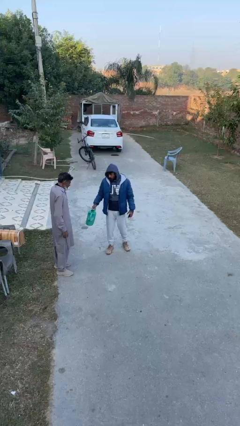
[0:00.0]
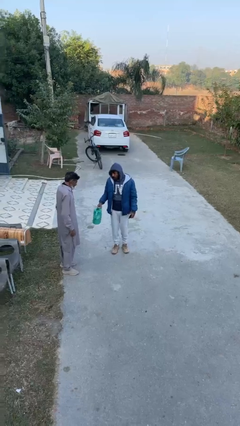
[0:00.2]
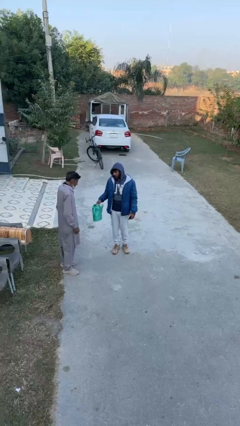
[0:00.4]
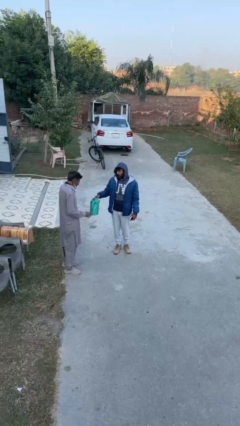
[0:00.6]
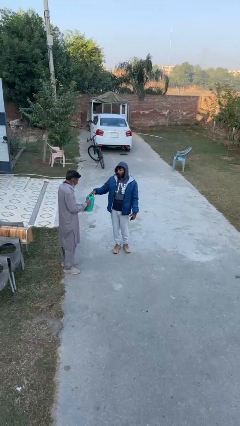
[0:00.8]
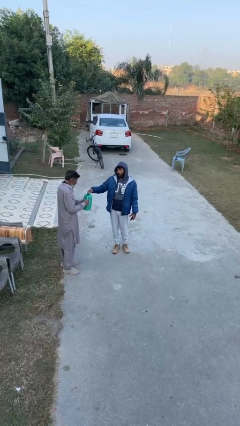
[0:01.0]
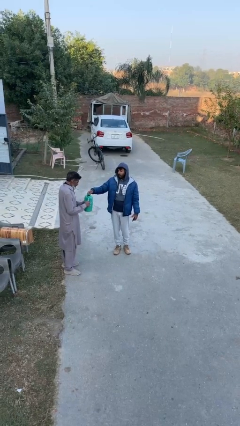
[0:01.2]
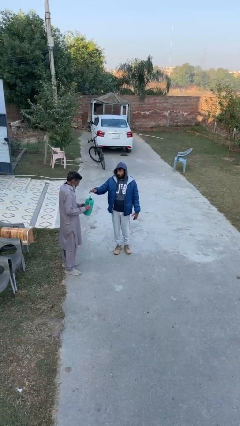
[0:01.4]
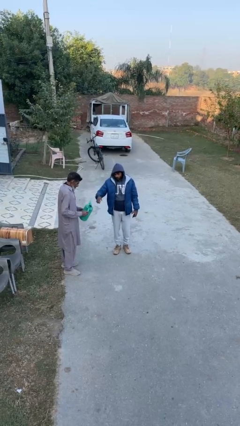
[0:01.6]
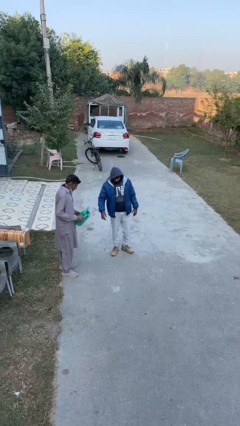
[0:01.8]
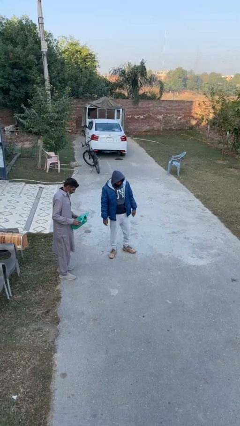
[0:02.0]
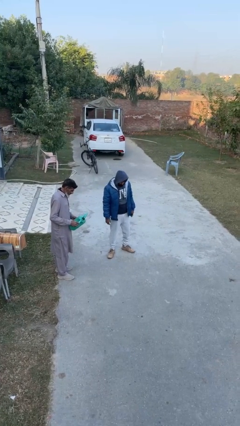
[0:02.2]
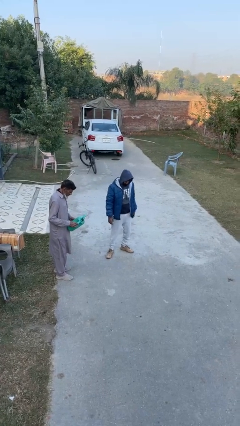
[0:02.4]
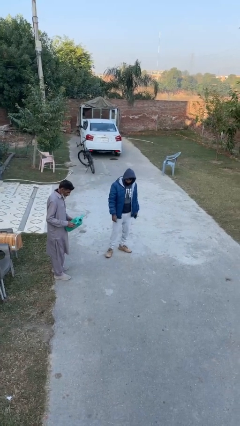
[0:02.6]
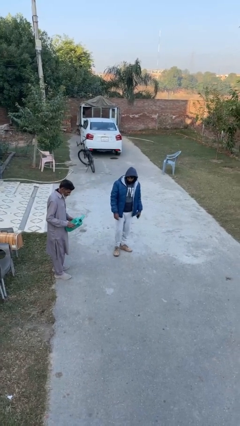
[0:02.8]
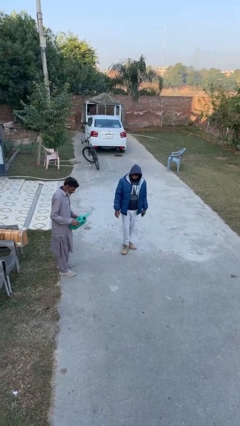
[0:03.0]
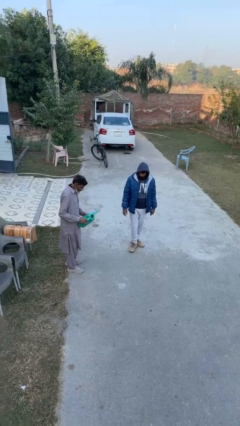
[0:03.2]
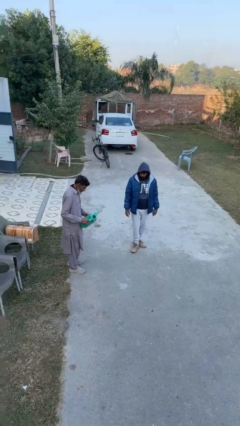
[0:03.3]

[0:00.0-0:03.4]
person transfers object to person

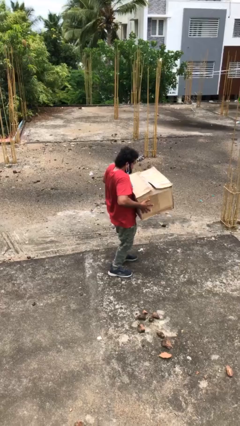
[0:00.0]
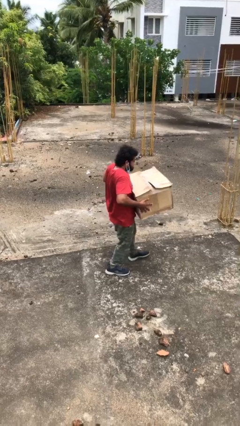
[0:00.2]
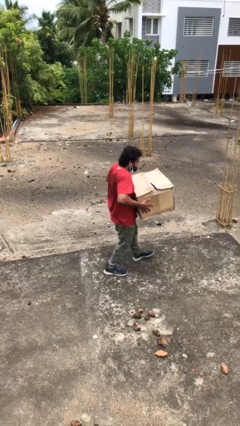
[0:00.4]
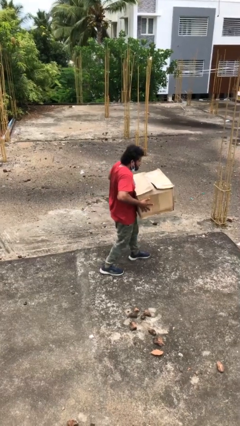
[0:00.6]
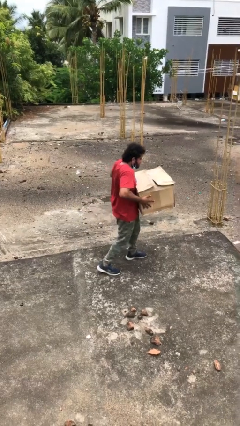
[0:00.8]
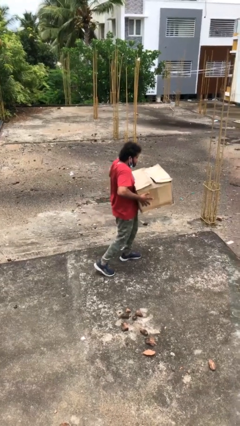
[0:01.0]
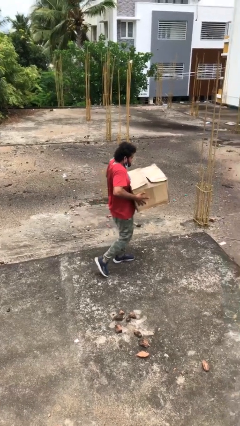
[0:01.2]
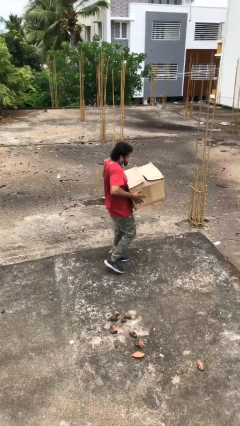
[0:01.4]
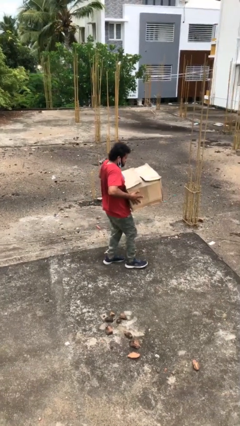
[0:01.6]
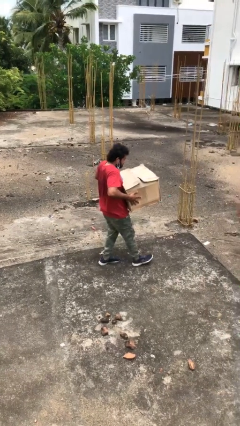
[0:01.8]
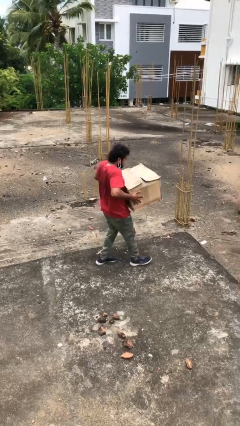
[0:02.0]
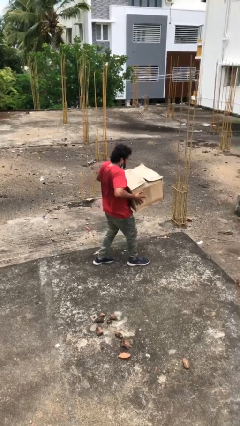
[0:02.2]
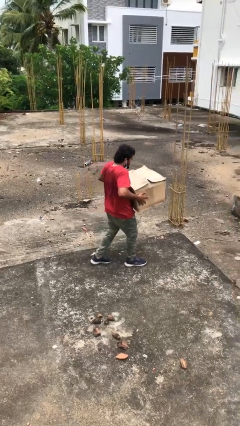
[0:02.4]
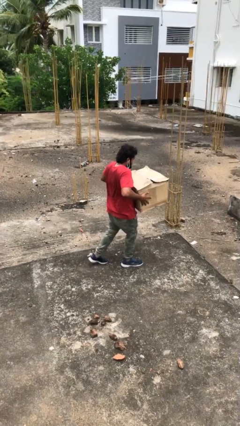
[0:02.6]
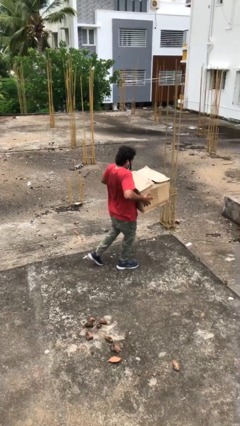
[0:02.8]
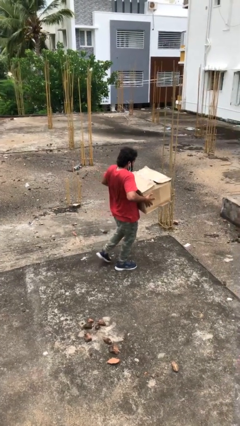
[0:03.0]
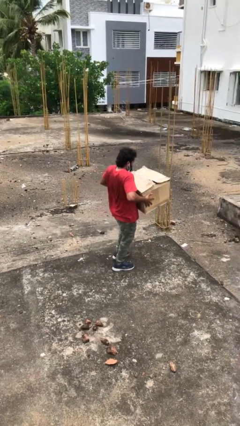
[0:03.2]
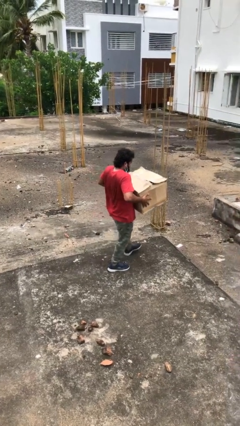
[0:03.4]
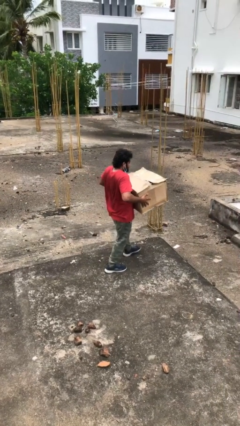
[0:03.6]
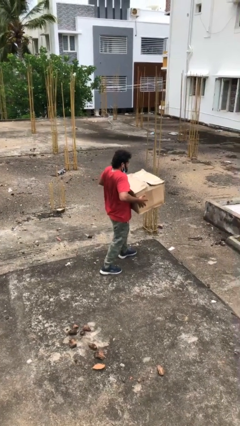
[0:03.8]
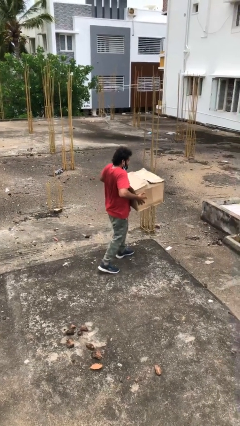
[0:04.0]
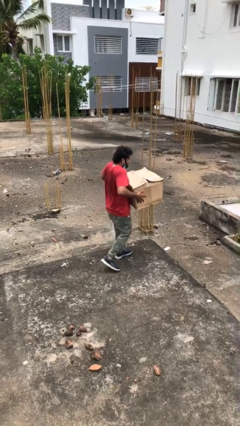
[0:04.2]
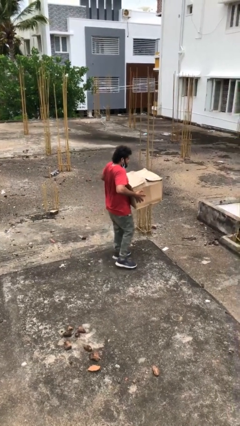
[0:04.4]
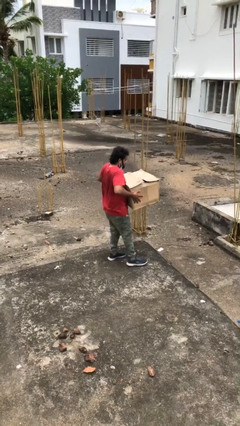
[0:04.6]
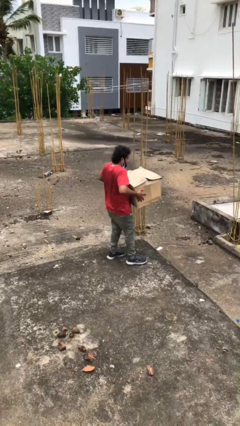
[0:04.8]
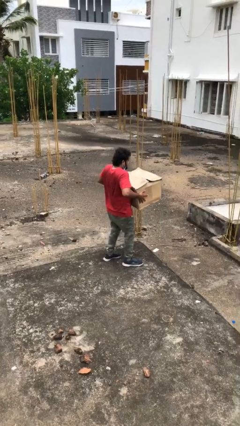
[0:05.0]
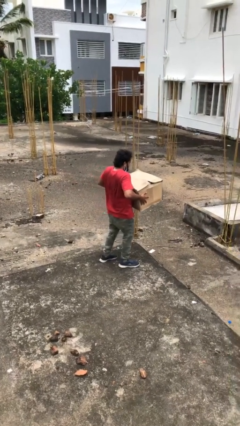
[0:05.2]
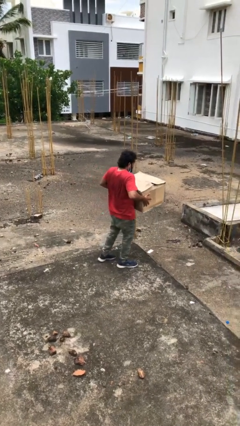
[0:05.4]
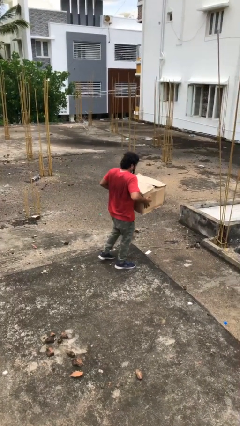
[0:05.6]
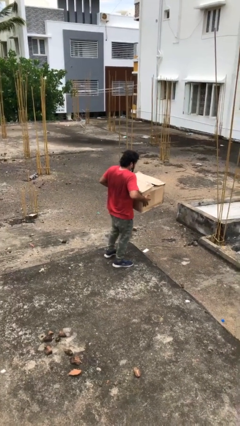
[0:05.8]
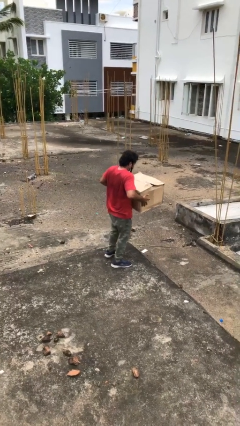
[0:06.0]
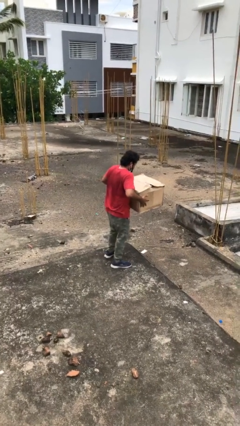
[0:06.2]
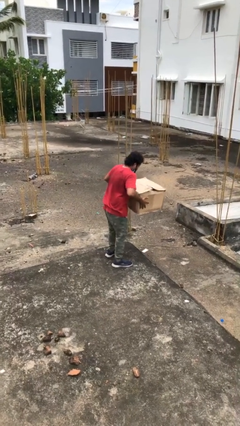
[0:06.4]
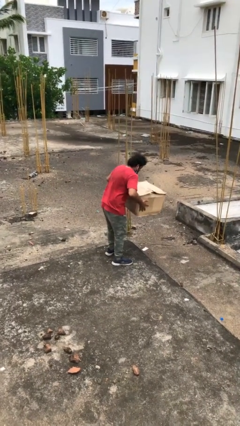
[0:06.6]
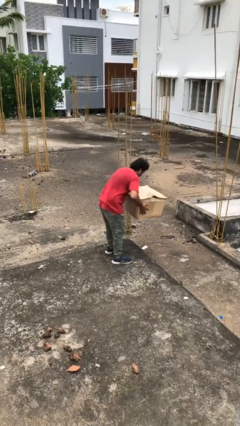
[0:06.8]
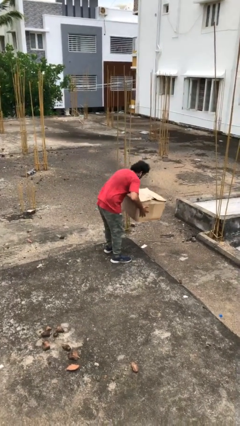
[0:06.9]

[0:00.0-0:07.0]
person carries heavy object

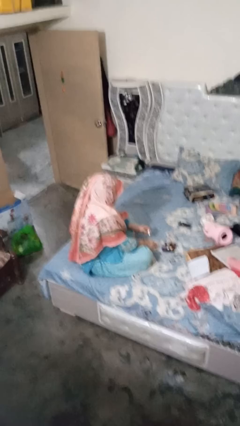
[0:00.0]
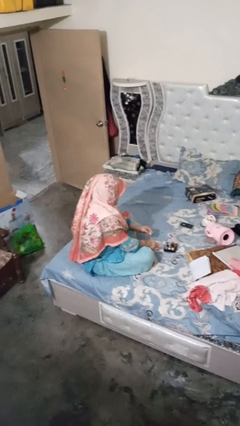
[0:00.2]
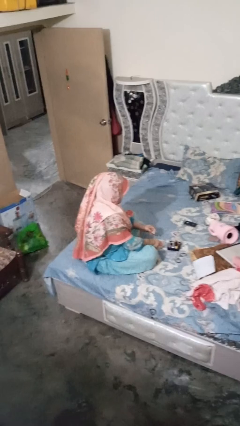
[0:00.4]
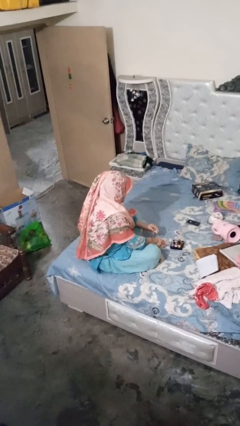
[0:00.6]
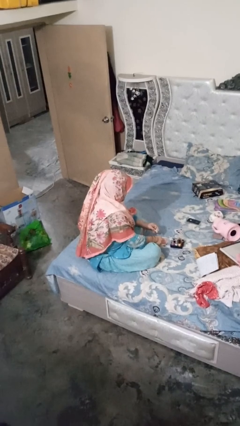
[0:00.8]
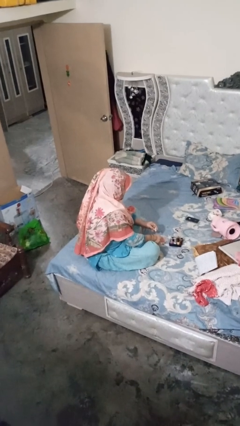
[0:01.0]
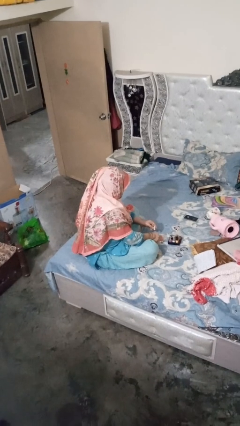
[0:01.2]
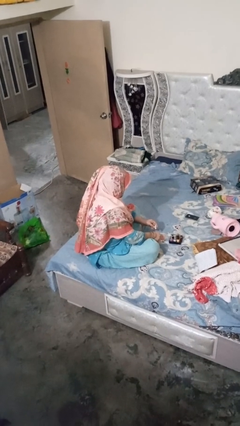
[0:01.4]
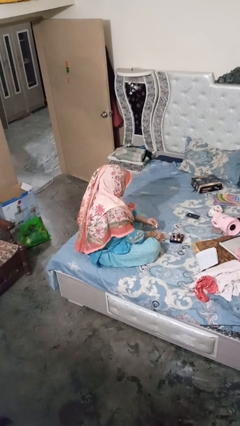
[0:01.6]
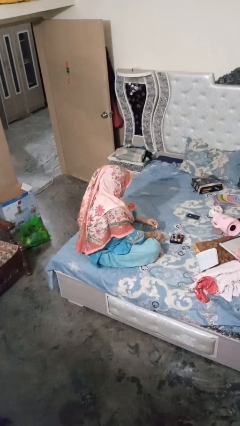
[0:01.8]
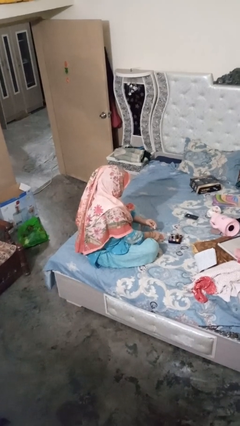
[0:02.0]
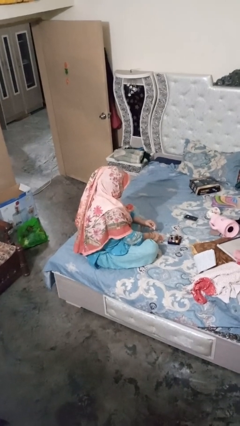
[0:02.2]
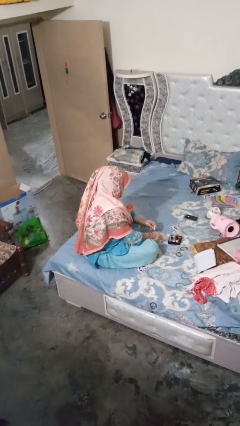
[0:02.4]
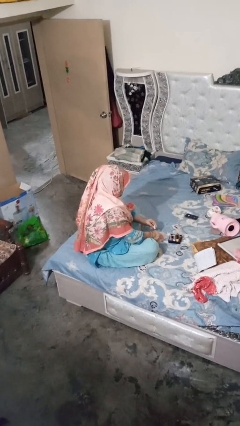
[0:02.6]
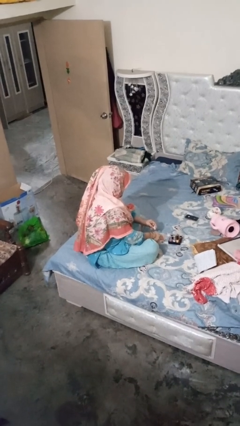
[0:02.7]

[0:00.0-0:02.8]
person paints fingernails

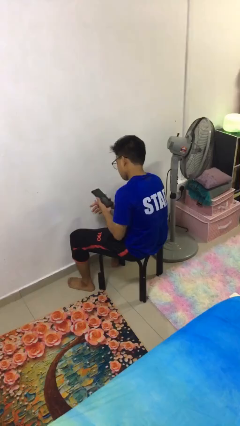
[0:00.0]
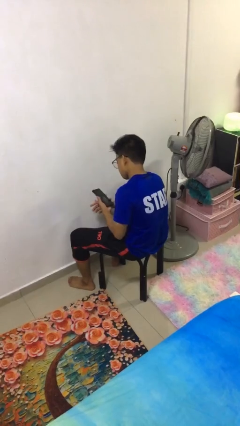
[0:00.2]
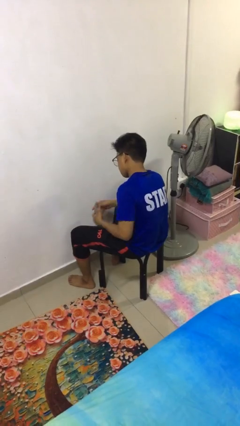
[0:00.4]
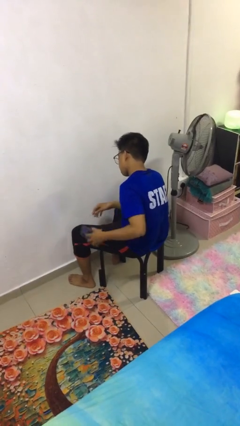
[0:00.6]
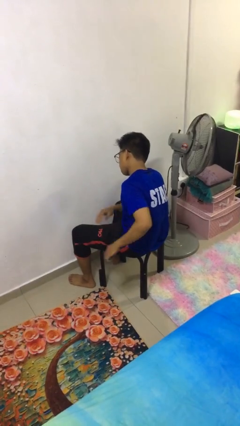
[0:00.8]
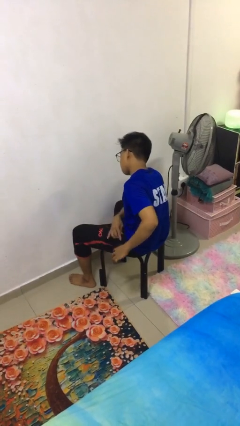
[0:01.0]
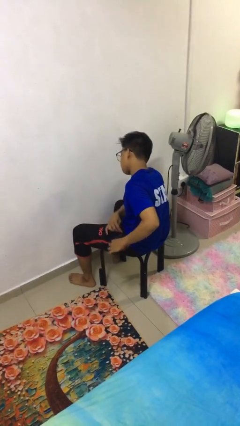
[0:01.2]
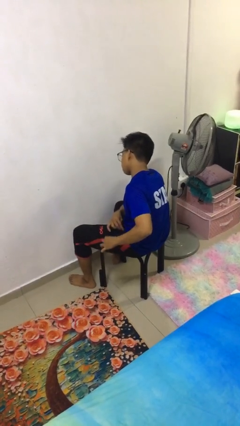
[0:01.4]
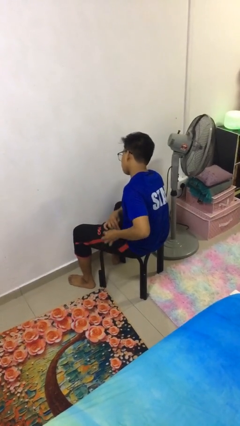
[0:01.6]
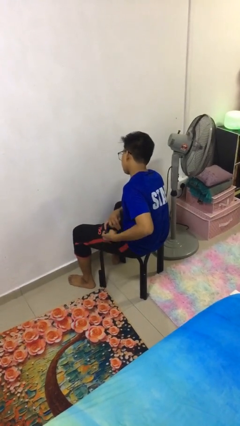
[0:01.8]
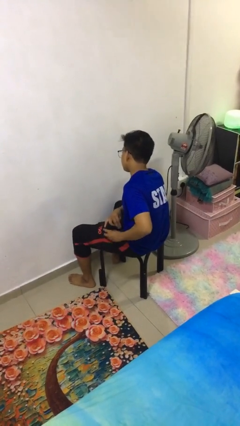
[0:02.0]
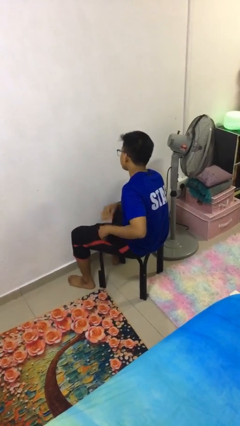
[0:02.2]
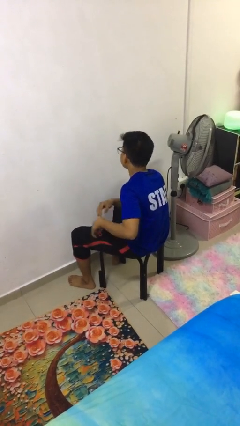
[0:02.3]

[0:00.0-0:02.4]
person puts phone into pocket

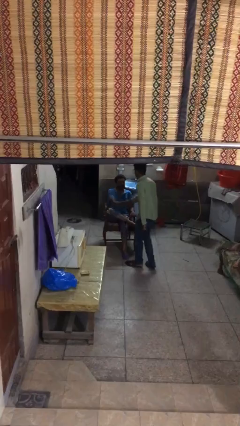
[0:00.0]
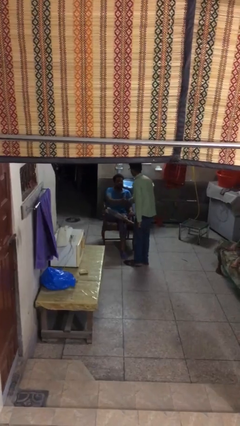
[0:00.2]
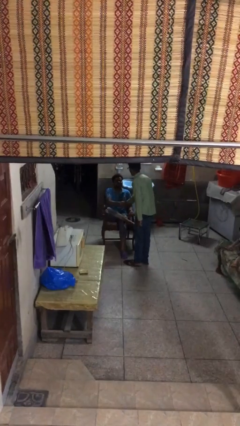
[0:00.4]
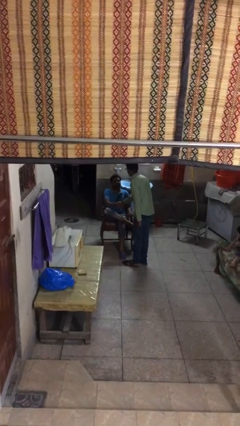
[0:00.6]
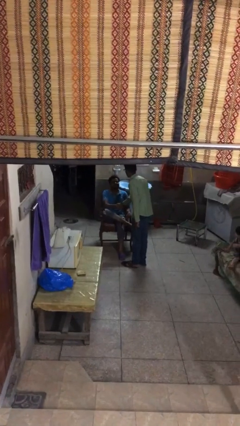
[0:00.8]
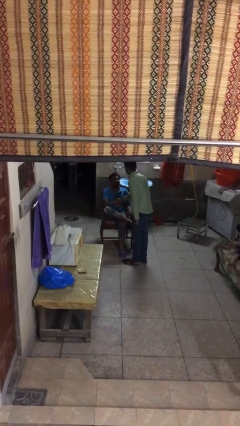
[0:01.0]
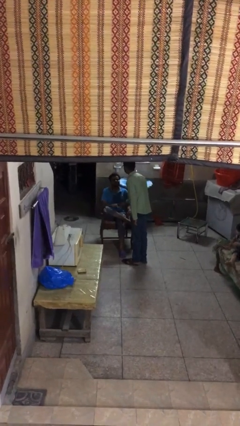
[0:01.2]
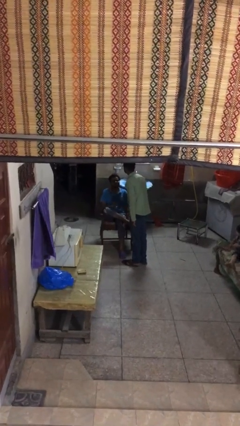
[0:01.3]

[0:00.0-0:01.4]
person shakes hand

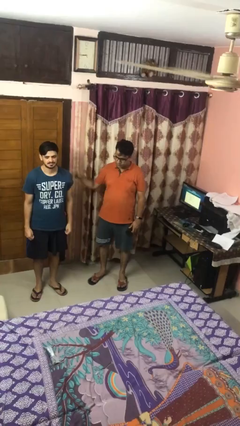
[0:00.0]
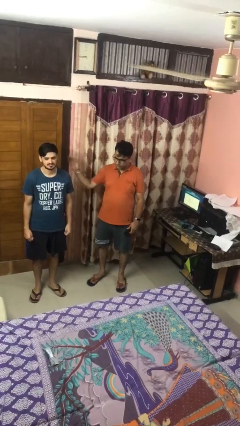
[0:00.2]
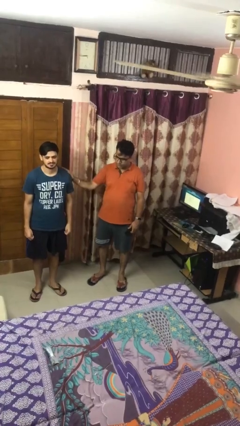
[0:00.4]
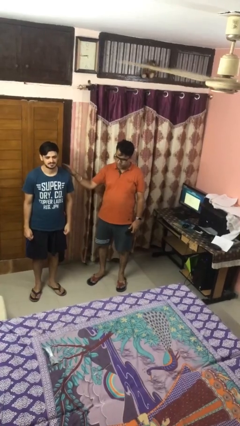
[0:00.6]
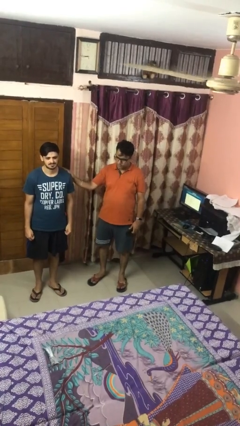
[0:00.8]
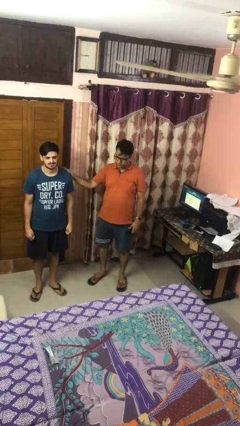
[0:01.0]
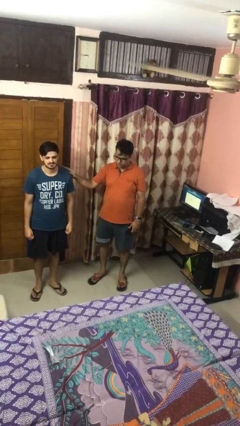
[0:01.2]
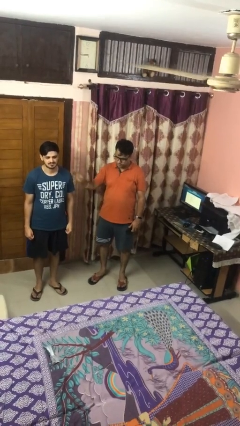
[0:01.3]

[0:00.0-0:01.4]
person pounds shoulders of person
